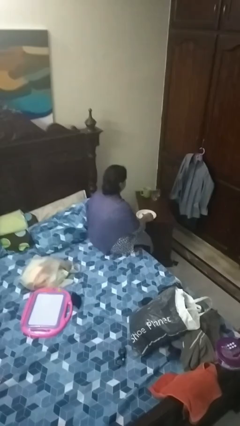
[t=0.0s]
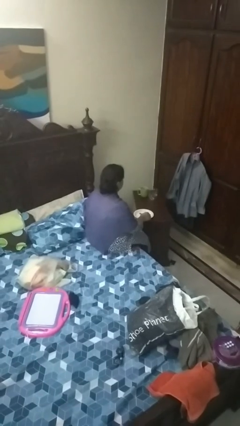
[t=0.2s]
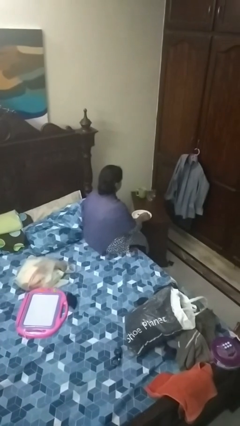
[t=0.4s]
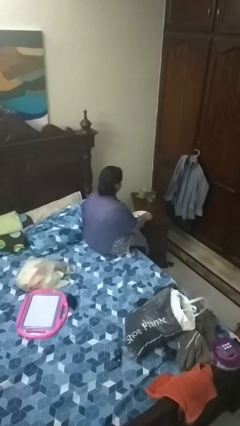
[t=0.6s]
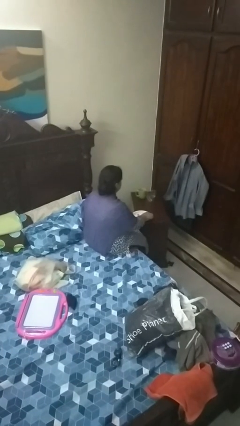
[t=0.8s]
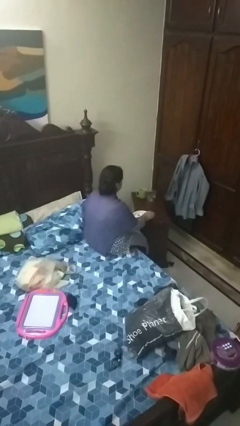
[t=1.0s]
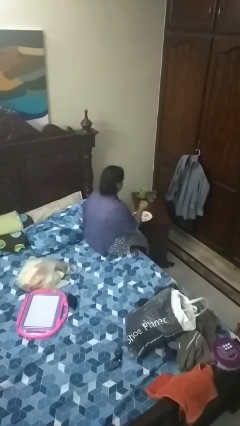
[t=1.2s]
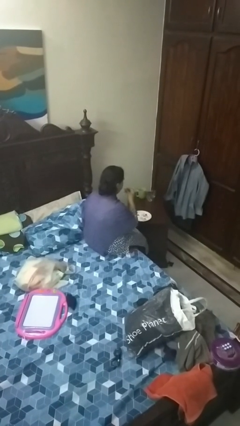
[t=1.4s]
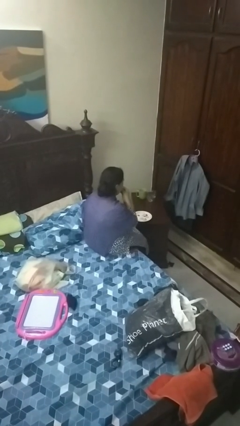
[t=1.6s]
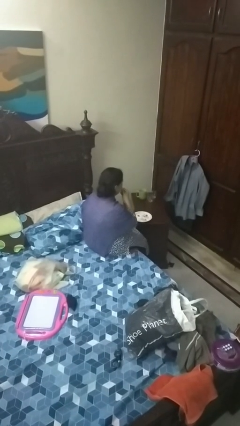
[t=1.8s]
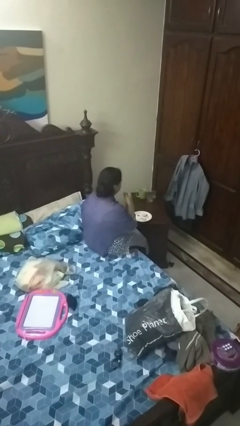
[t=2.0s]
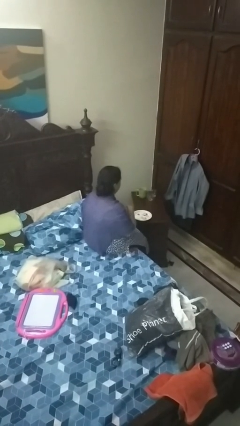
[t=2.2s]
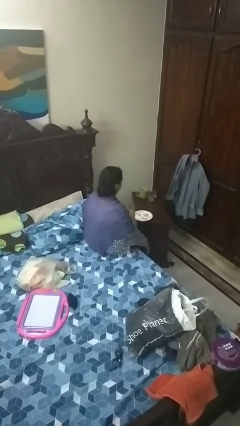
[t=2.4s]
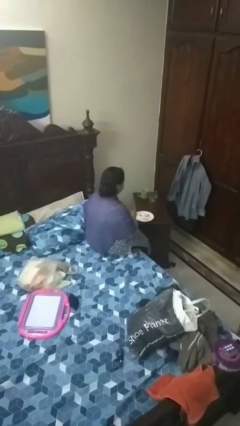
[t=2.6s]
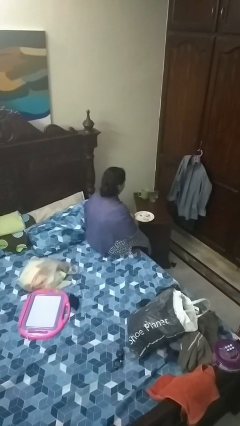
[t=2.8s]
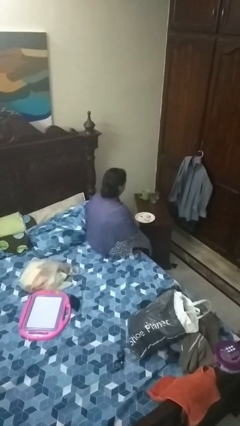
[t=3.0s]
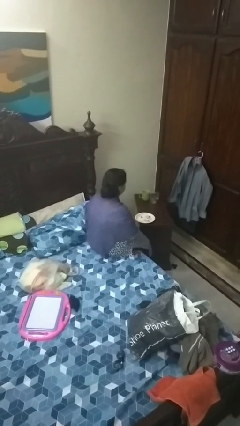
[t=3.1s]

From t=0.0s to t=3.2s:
person eats with hands

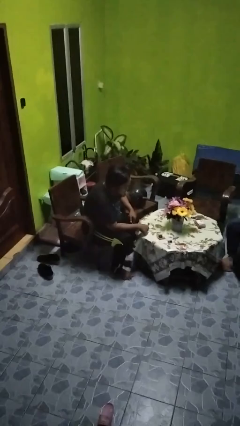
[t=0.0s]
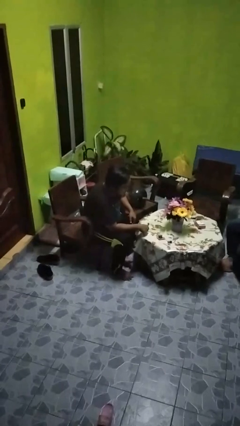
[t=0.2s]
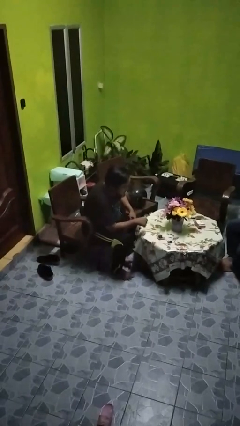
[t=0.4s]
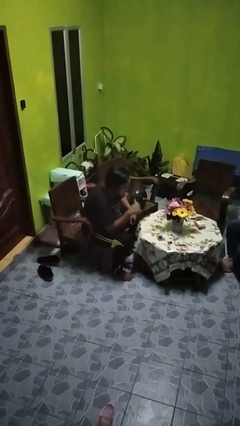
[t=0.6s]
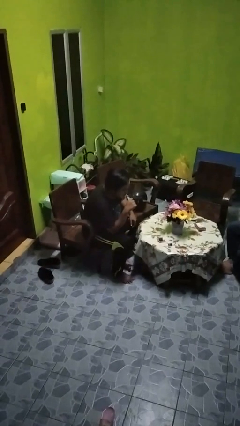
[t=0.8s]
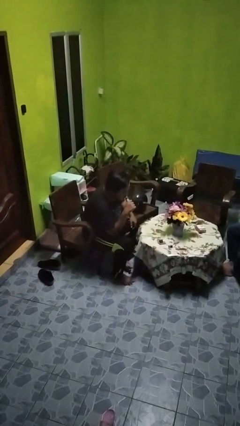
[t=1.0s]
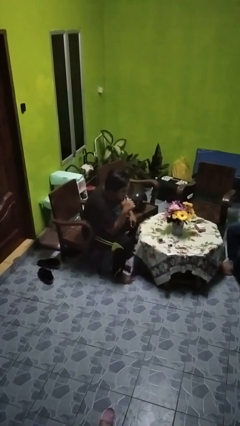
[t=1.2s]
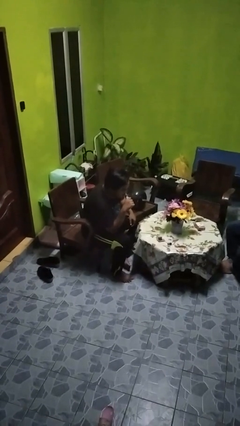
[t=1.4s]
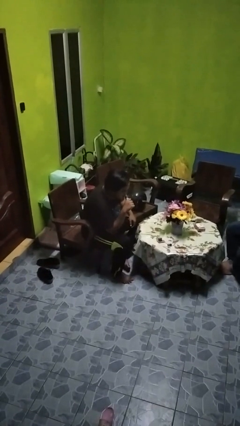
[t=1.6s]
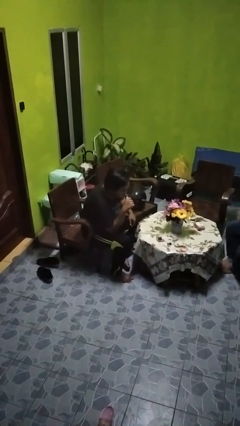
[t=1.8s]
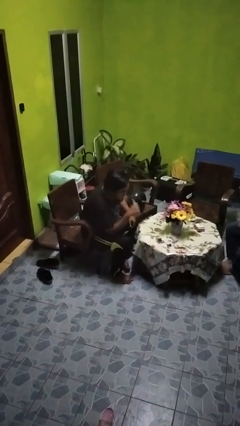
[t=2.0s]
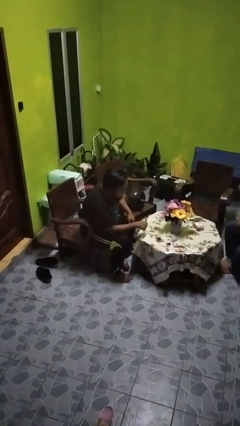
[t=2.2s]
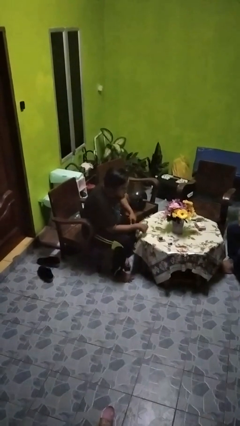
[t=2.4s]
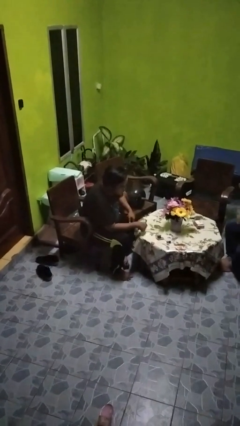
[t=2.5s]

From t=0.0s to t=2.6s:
person vapes

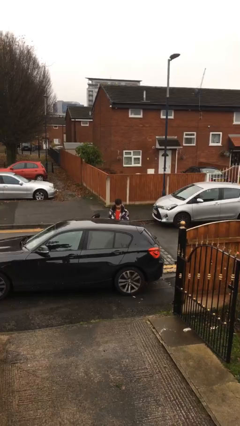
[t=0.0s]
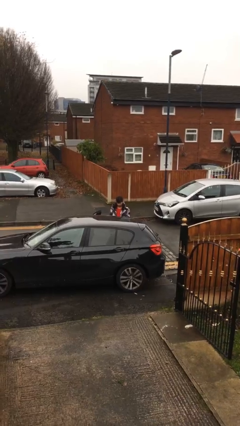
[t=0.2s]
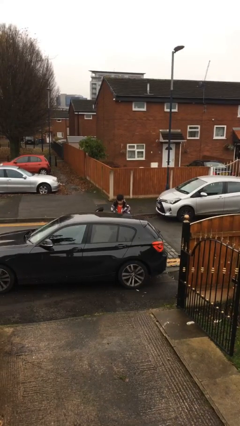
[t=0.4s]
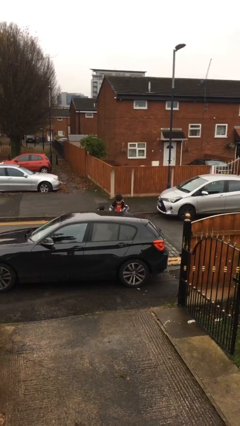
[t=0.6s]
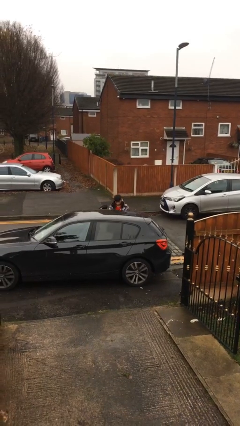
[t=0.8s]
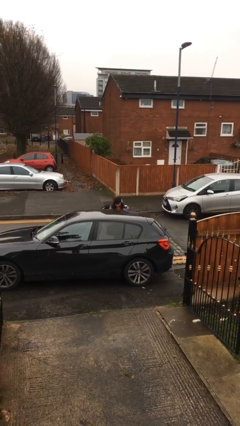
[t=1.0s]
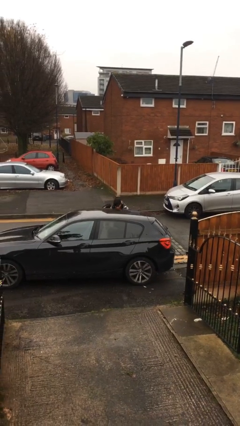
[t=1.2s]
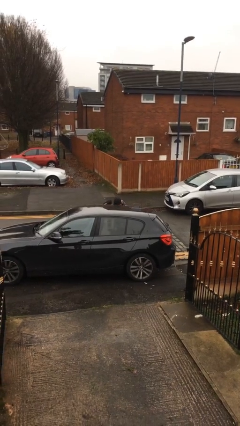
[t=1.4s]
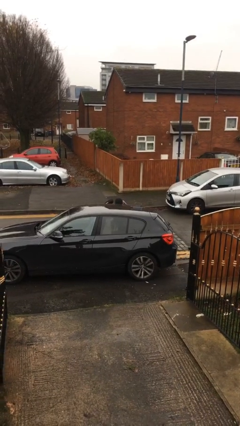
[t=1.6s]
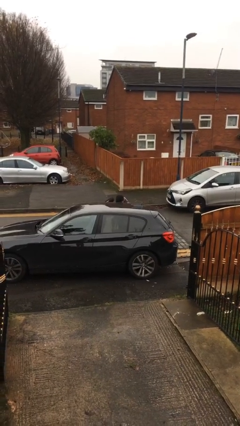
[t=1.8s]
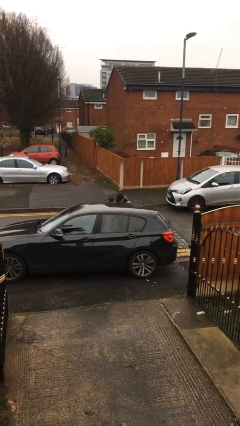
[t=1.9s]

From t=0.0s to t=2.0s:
person loads car

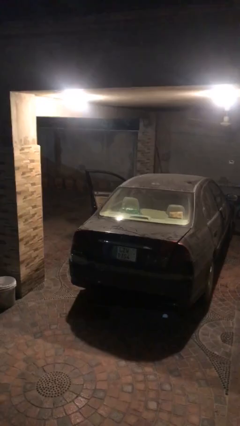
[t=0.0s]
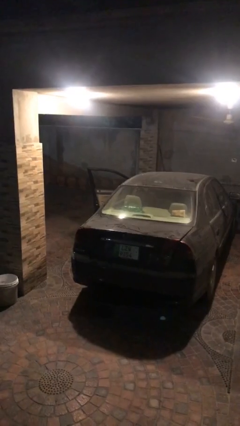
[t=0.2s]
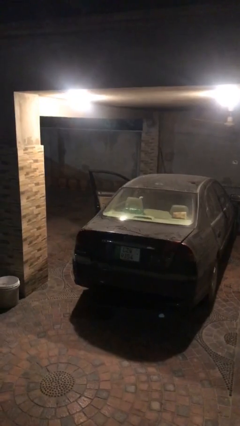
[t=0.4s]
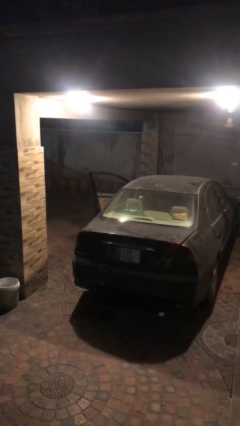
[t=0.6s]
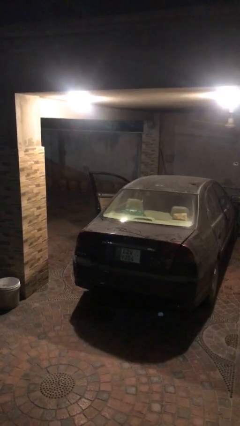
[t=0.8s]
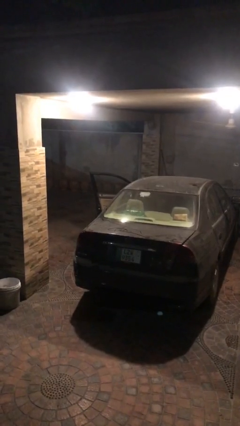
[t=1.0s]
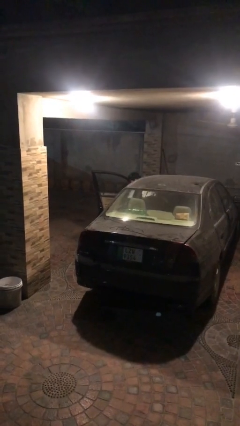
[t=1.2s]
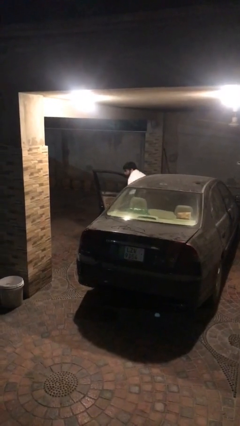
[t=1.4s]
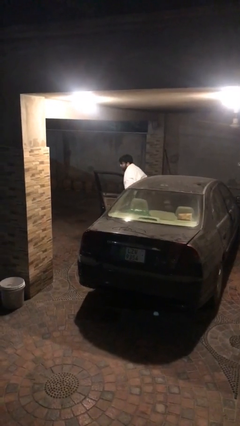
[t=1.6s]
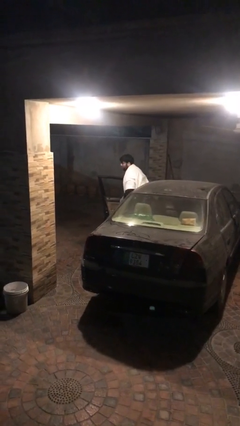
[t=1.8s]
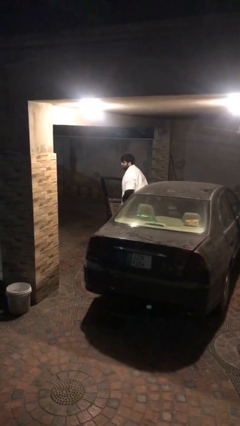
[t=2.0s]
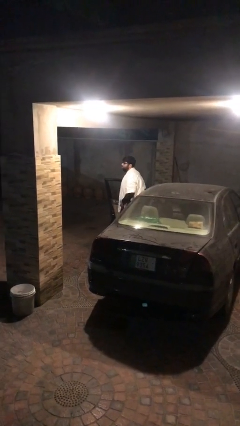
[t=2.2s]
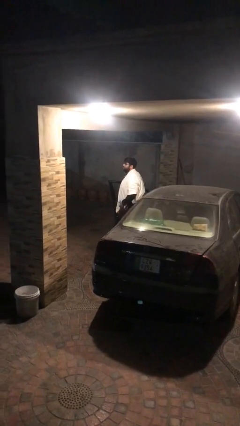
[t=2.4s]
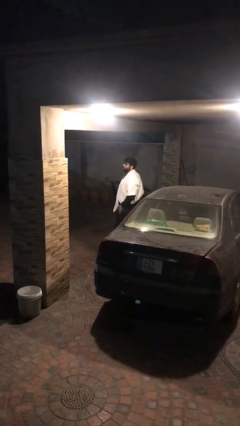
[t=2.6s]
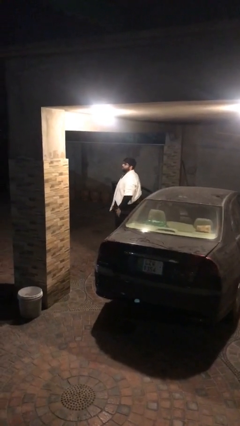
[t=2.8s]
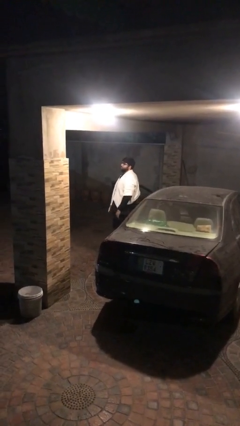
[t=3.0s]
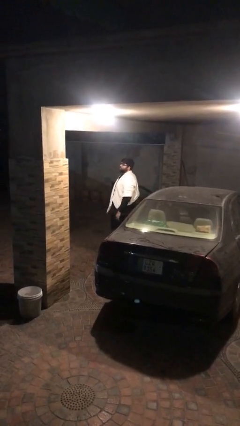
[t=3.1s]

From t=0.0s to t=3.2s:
person exits car

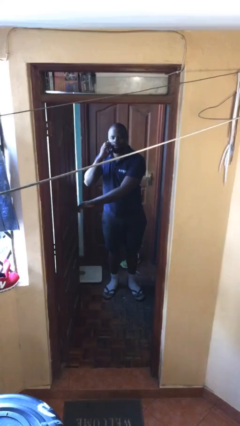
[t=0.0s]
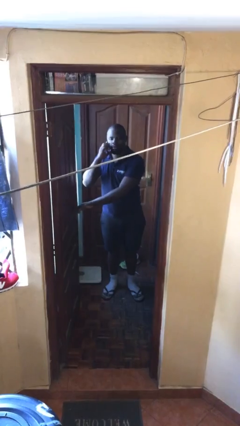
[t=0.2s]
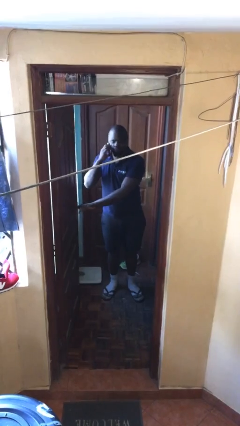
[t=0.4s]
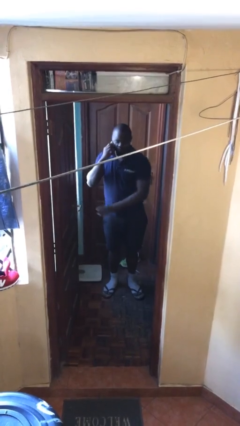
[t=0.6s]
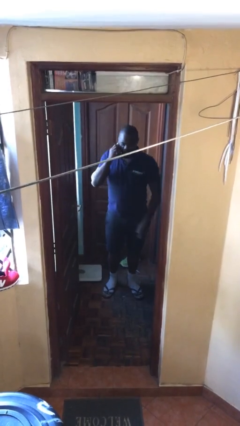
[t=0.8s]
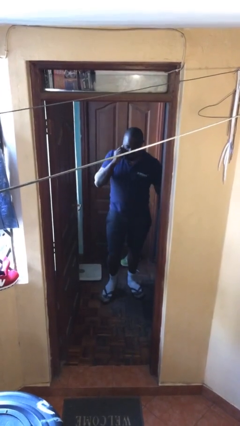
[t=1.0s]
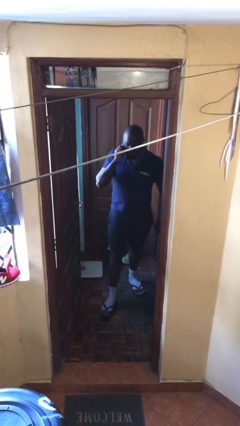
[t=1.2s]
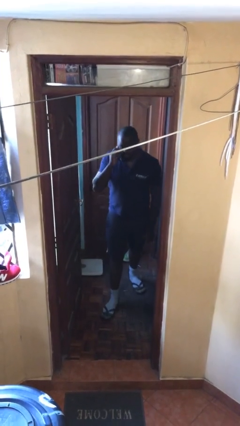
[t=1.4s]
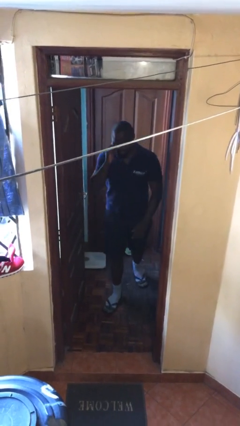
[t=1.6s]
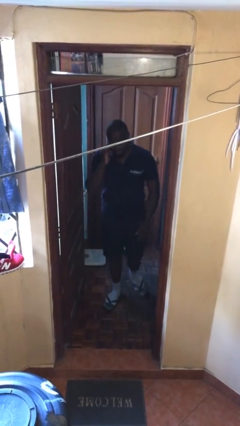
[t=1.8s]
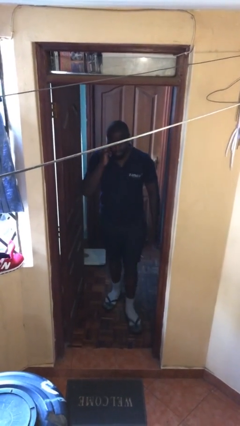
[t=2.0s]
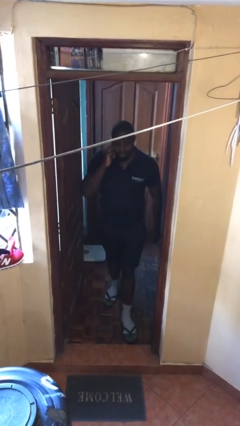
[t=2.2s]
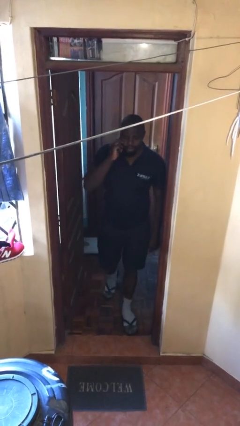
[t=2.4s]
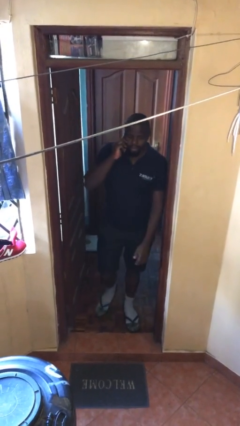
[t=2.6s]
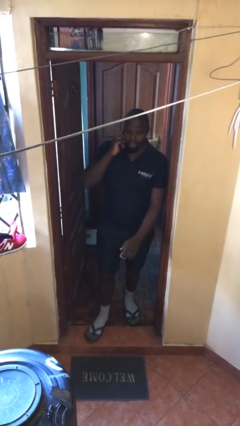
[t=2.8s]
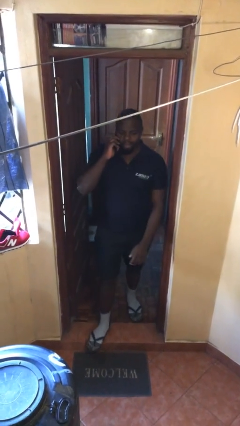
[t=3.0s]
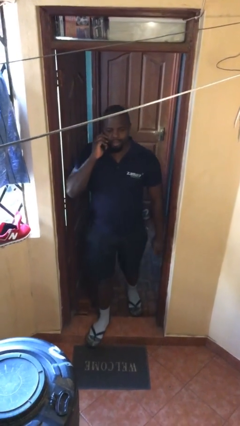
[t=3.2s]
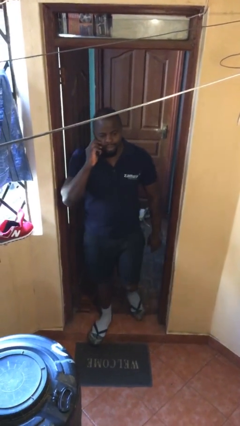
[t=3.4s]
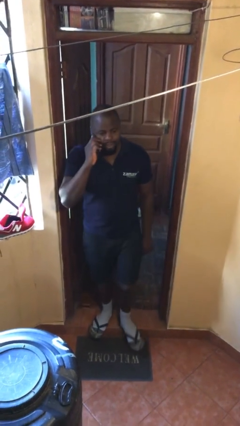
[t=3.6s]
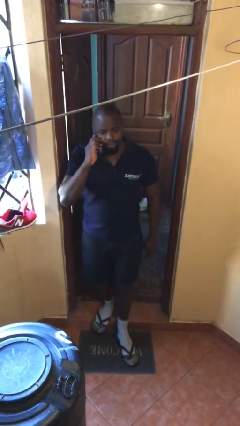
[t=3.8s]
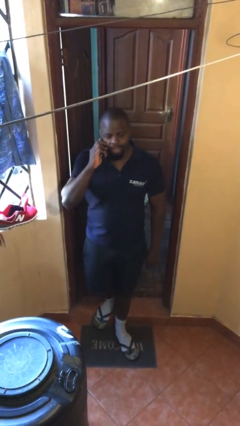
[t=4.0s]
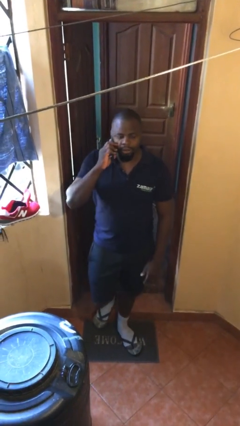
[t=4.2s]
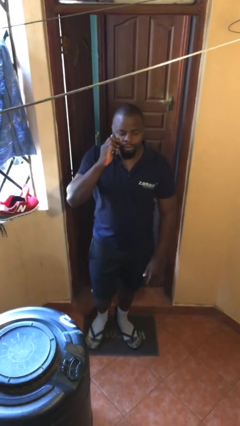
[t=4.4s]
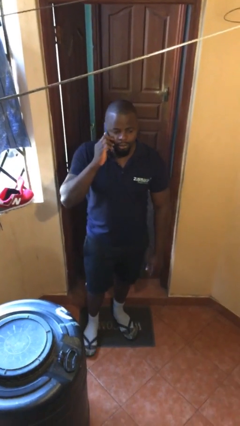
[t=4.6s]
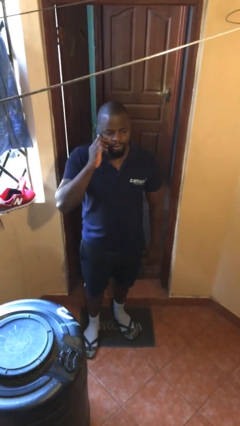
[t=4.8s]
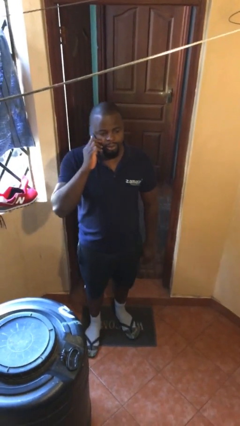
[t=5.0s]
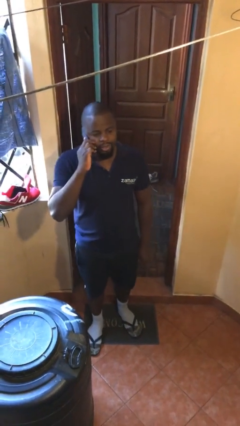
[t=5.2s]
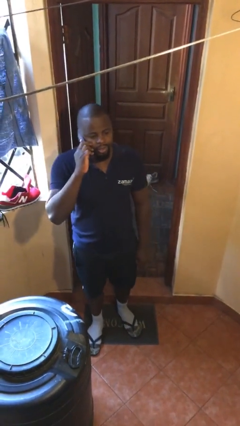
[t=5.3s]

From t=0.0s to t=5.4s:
person enters scene through structure

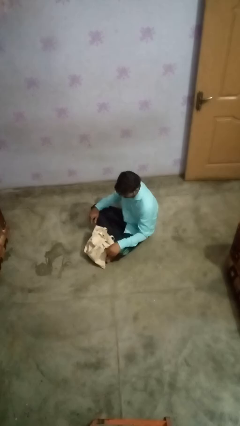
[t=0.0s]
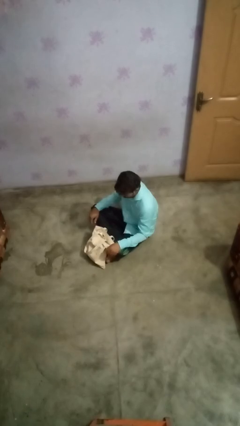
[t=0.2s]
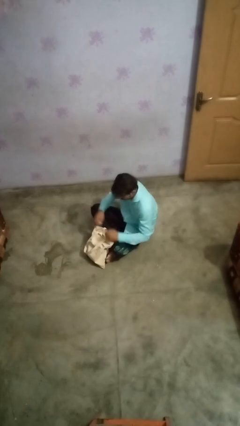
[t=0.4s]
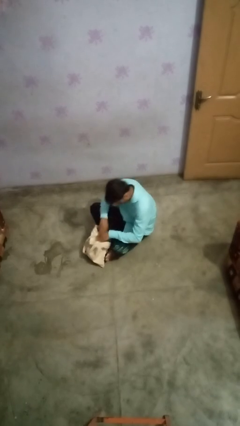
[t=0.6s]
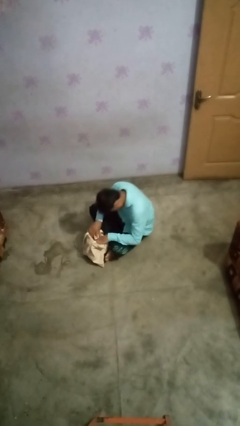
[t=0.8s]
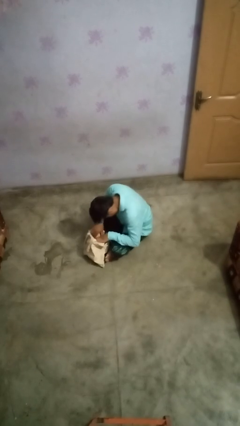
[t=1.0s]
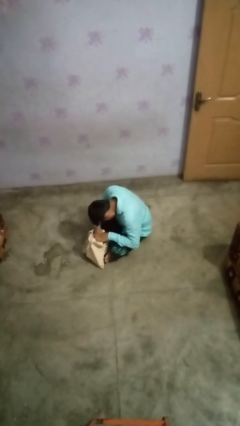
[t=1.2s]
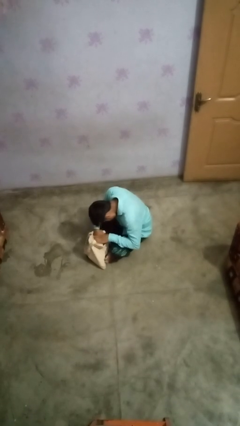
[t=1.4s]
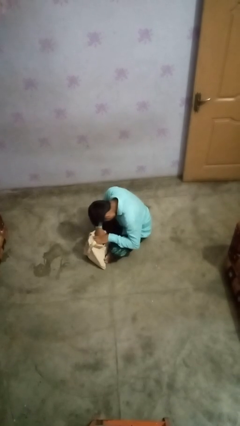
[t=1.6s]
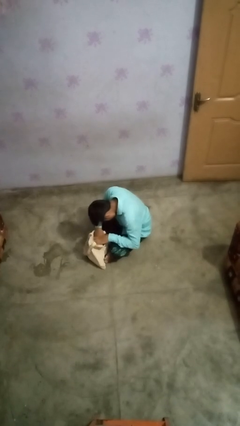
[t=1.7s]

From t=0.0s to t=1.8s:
person searches in bag
